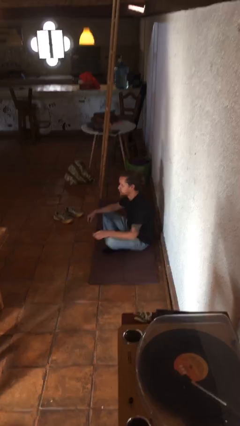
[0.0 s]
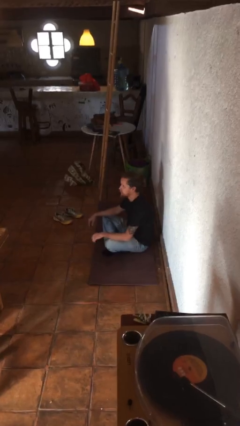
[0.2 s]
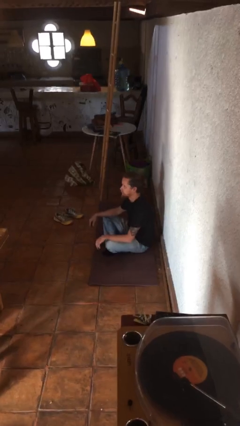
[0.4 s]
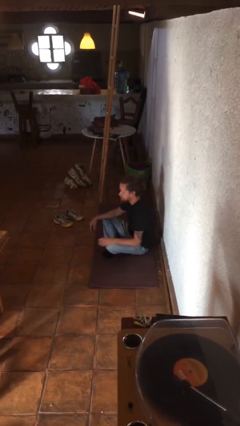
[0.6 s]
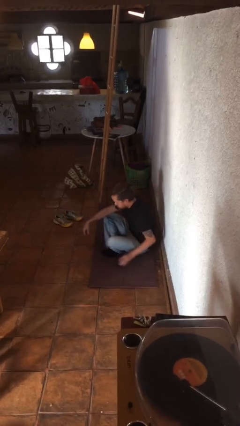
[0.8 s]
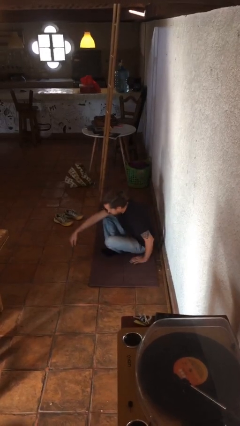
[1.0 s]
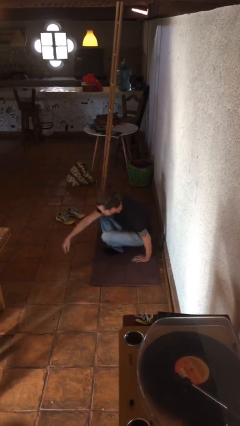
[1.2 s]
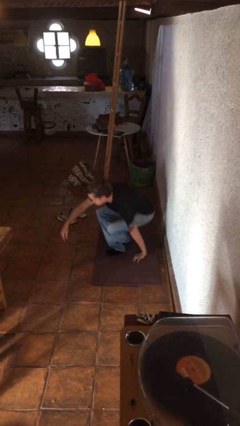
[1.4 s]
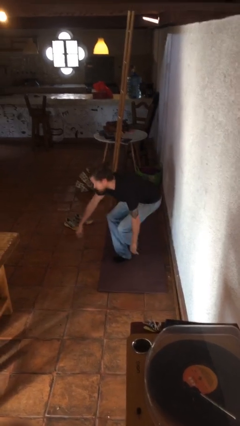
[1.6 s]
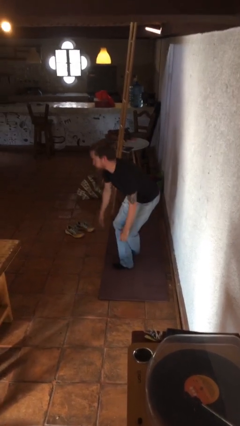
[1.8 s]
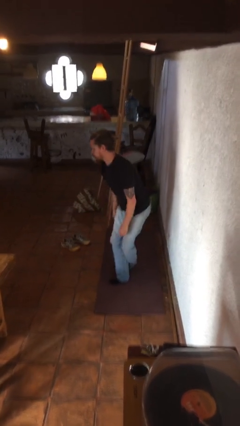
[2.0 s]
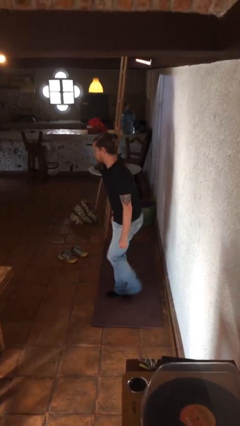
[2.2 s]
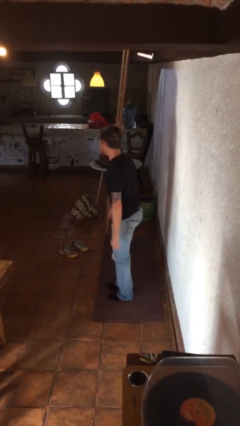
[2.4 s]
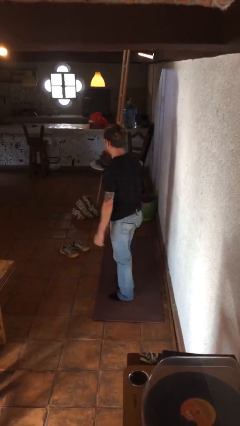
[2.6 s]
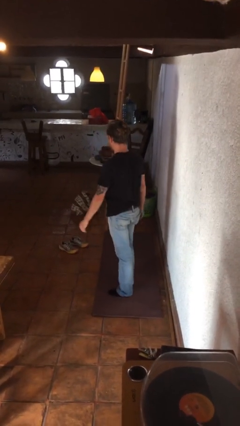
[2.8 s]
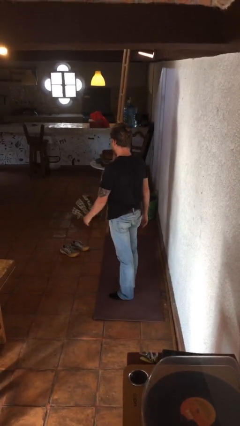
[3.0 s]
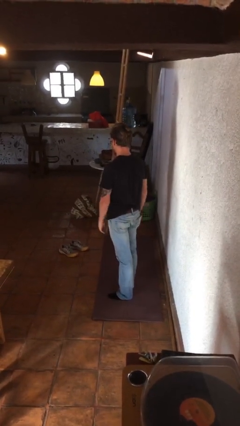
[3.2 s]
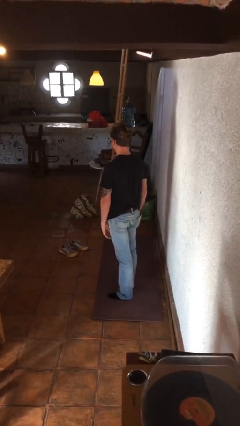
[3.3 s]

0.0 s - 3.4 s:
person stands up from floor

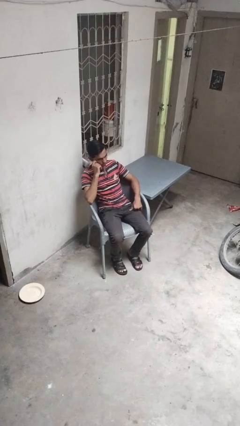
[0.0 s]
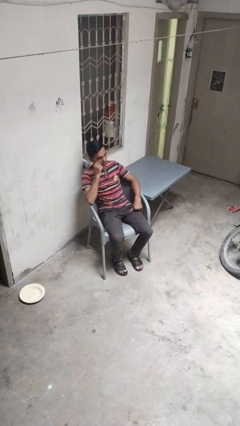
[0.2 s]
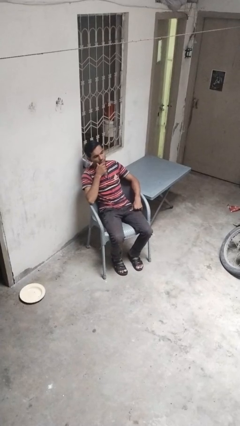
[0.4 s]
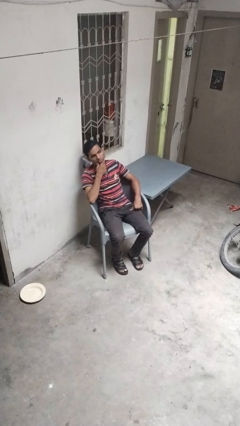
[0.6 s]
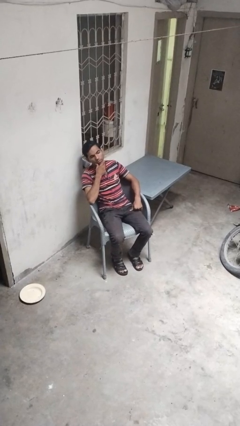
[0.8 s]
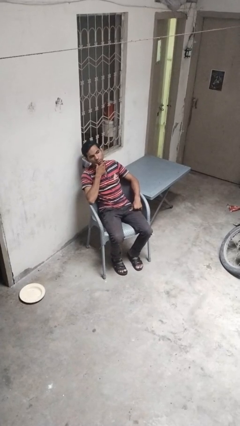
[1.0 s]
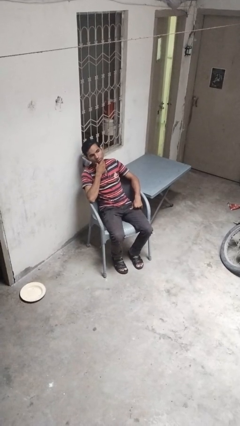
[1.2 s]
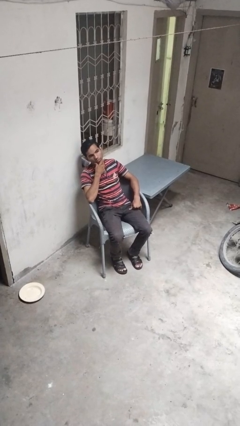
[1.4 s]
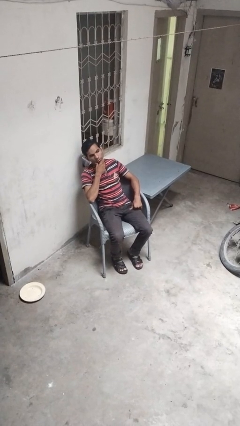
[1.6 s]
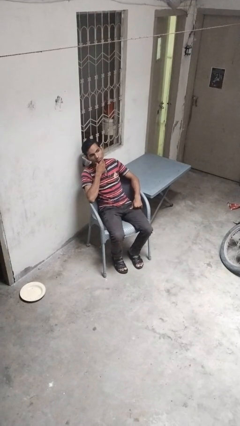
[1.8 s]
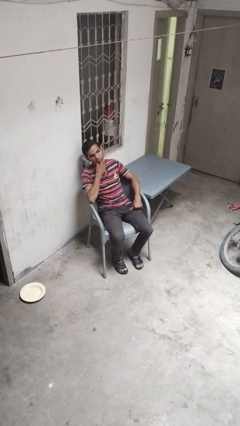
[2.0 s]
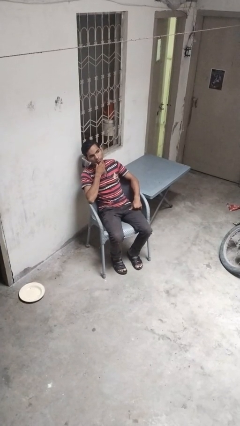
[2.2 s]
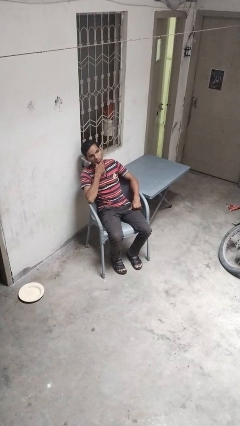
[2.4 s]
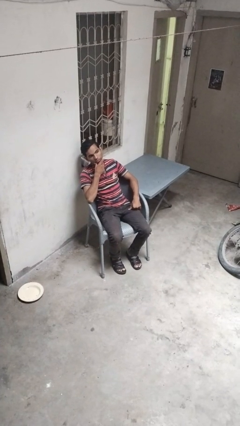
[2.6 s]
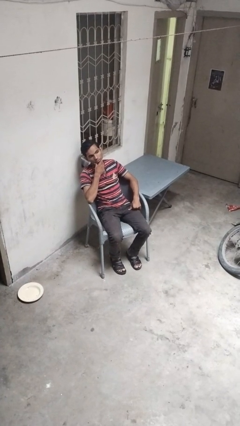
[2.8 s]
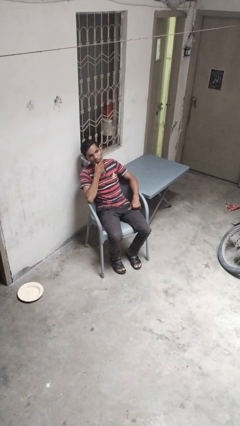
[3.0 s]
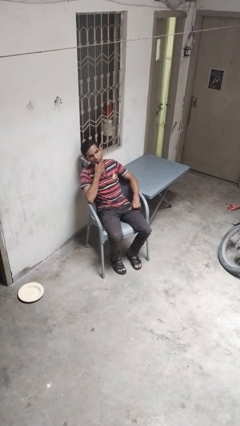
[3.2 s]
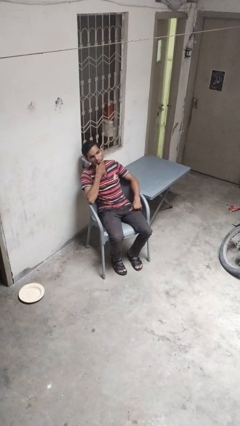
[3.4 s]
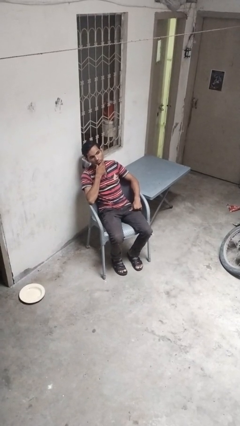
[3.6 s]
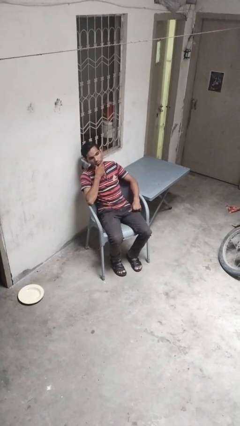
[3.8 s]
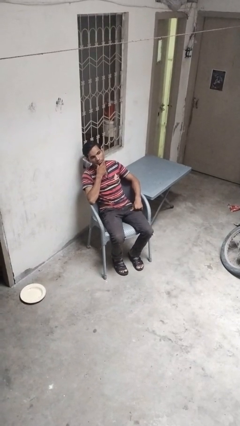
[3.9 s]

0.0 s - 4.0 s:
person strokes chin

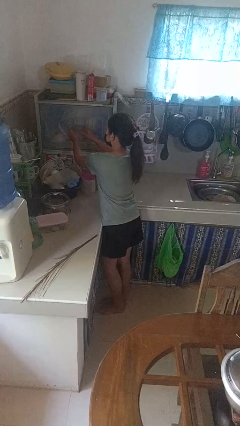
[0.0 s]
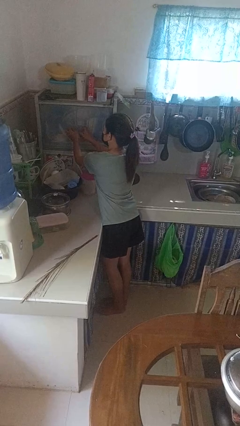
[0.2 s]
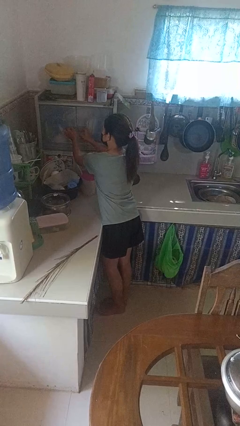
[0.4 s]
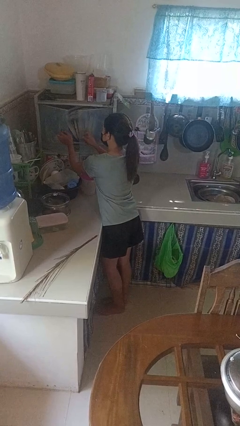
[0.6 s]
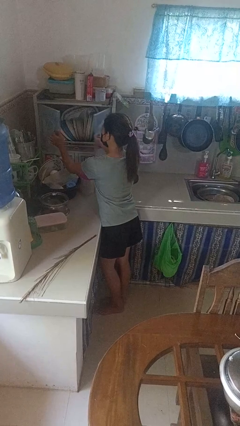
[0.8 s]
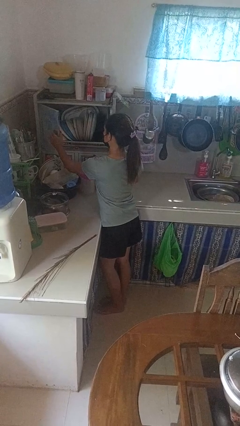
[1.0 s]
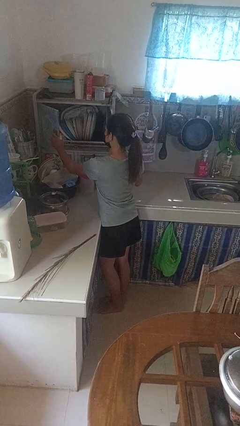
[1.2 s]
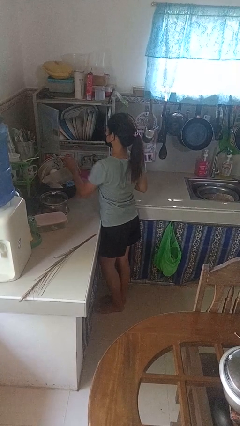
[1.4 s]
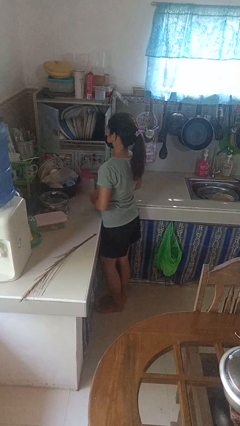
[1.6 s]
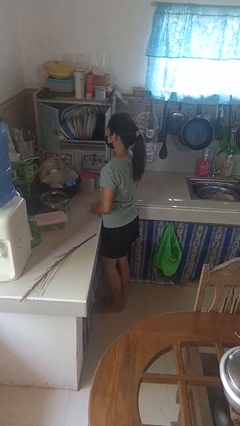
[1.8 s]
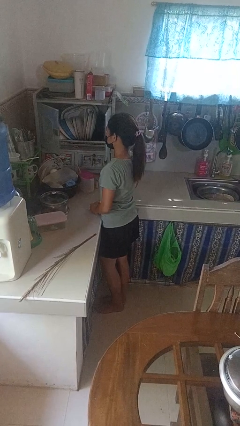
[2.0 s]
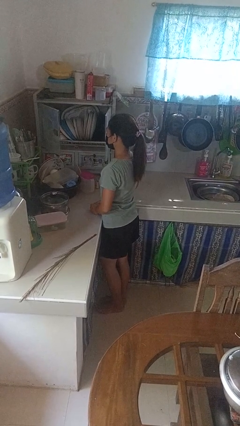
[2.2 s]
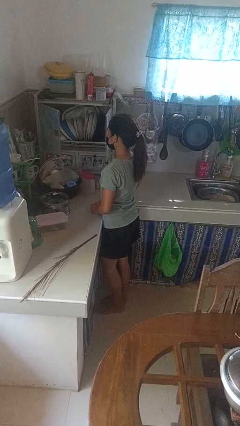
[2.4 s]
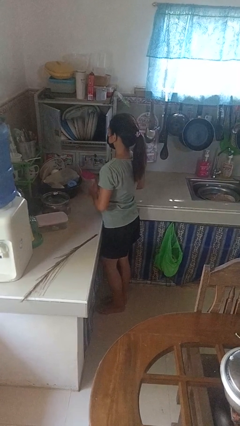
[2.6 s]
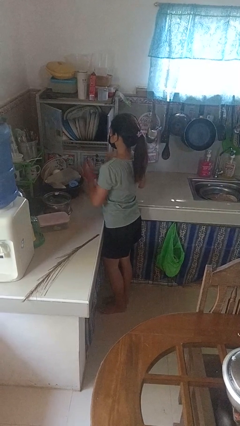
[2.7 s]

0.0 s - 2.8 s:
person opens kitchen drawer

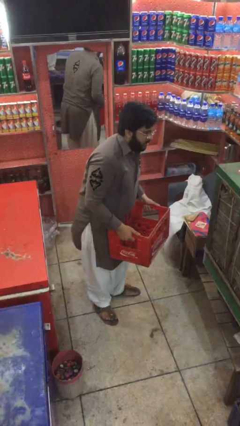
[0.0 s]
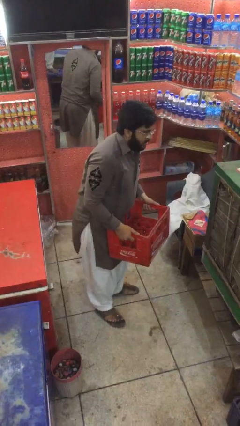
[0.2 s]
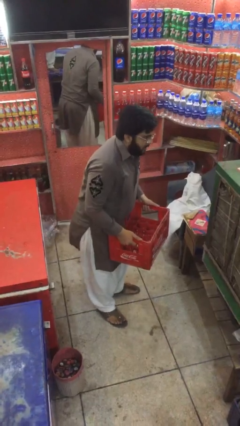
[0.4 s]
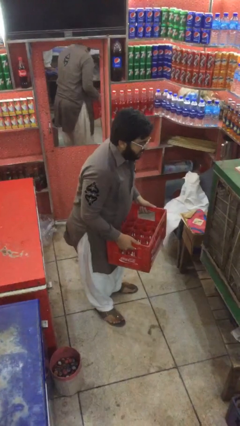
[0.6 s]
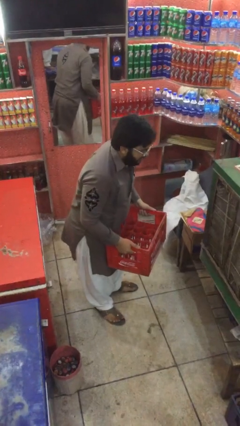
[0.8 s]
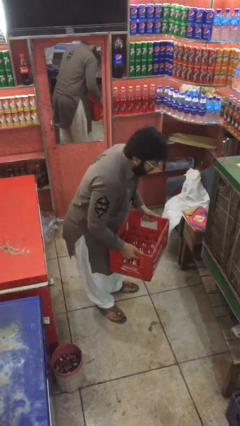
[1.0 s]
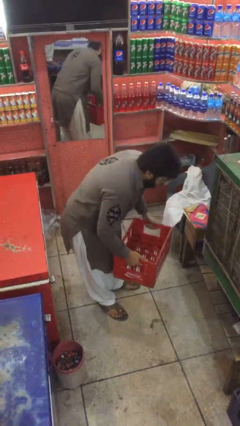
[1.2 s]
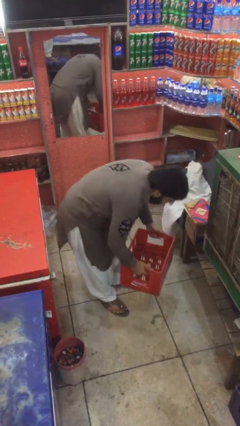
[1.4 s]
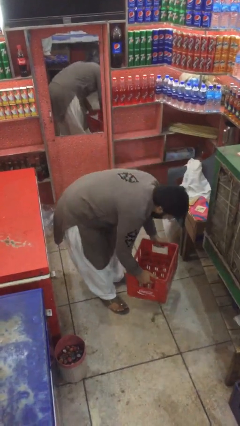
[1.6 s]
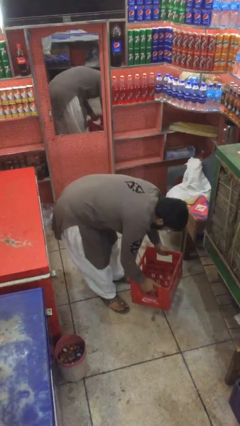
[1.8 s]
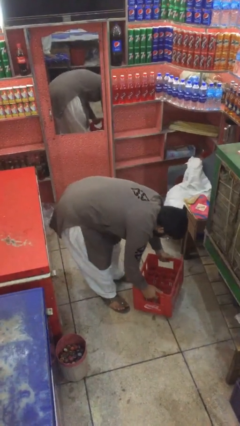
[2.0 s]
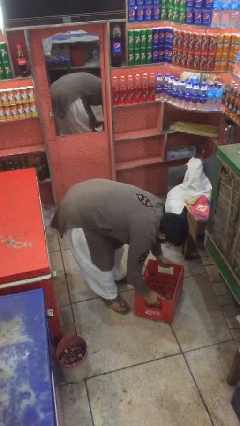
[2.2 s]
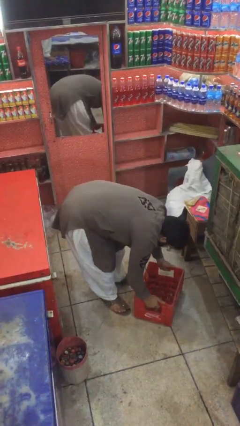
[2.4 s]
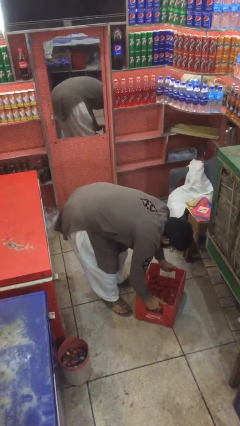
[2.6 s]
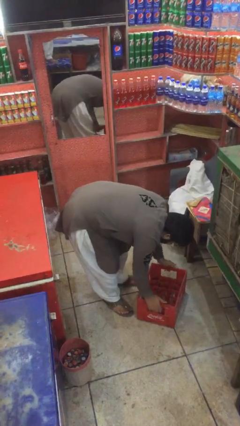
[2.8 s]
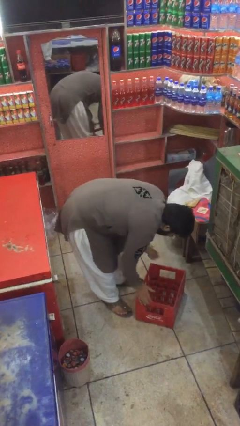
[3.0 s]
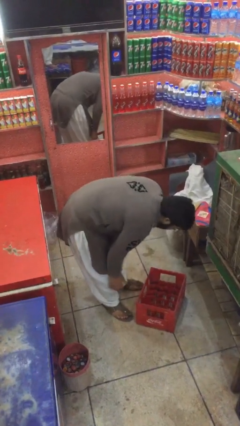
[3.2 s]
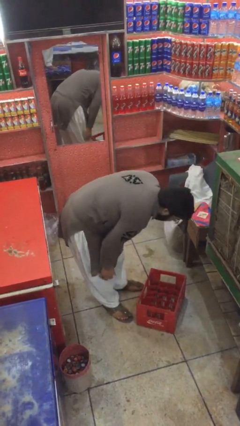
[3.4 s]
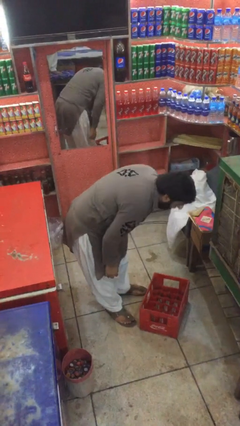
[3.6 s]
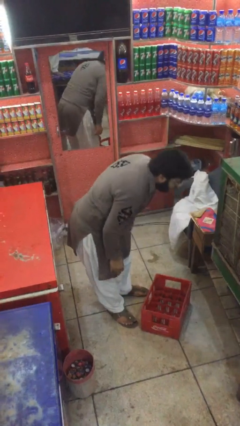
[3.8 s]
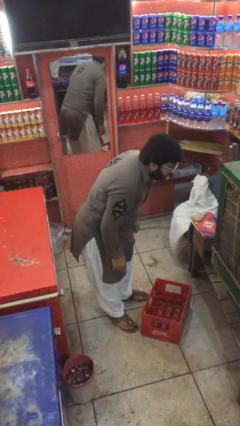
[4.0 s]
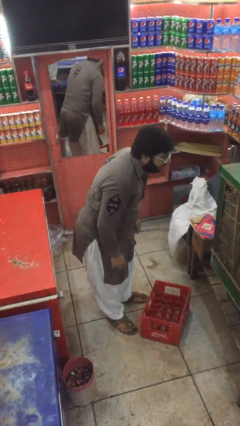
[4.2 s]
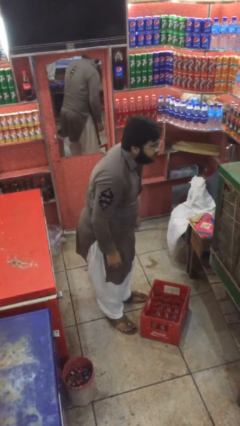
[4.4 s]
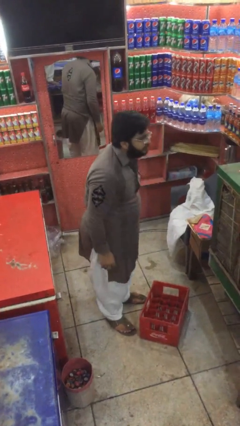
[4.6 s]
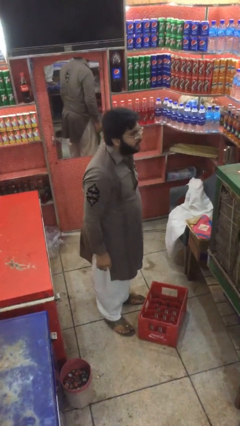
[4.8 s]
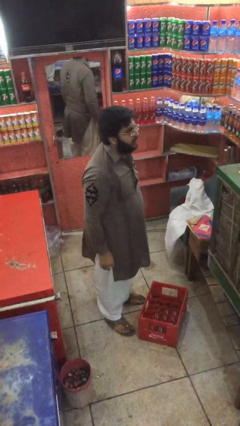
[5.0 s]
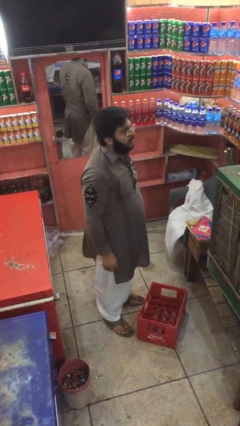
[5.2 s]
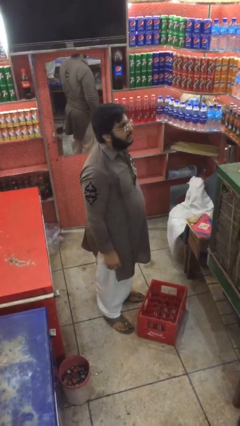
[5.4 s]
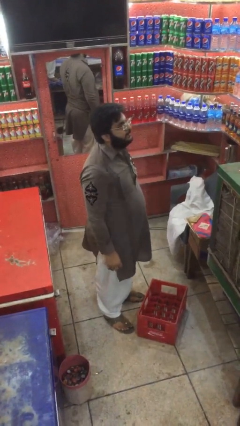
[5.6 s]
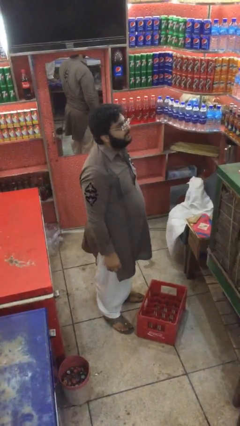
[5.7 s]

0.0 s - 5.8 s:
person puts down object on floor

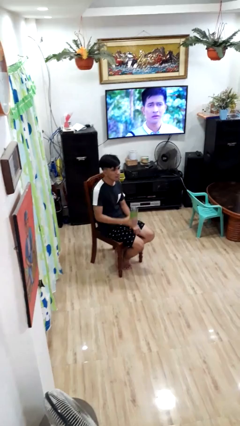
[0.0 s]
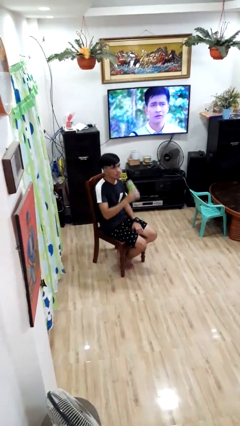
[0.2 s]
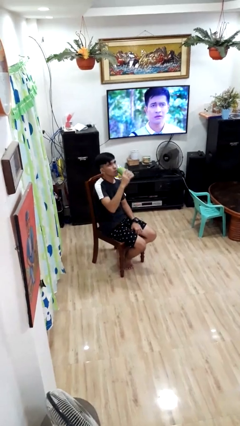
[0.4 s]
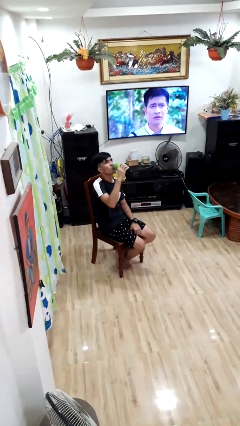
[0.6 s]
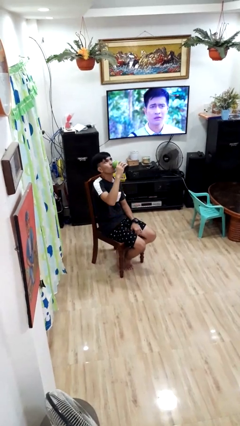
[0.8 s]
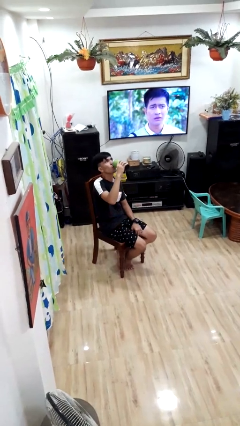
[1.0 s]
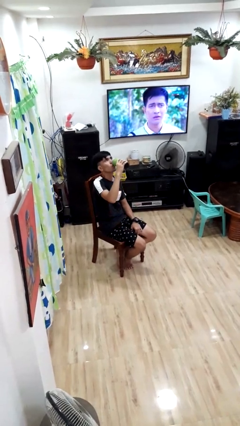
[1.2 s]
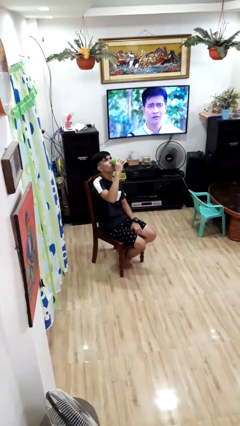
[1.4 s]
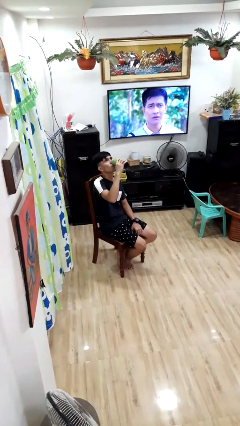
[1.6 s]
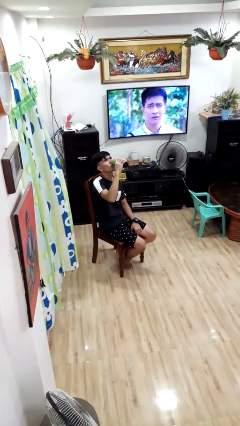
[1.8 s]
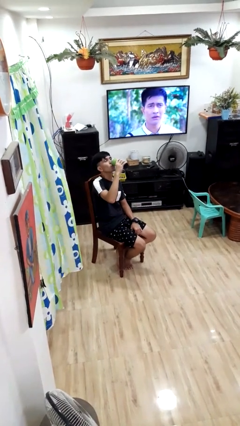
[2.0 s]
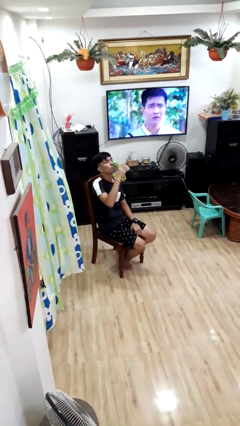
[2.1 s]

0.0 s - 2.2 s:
person drinks from bottle
